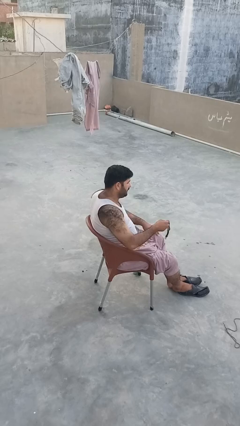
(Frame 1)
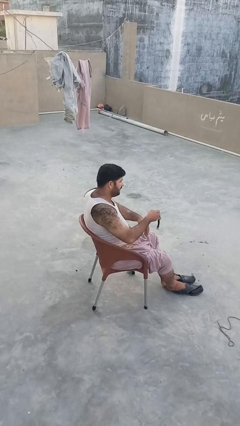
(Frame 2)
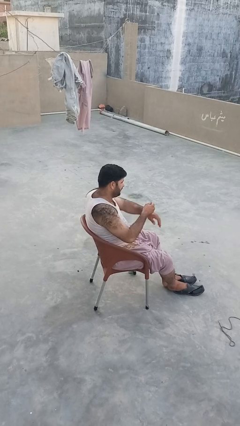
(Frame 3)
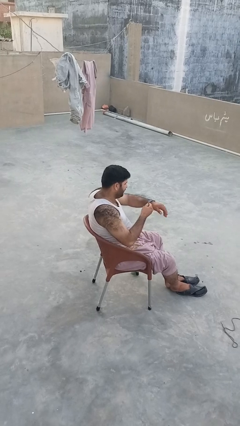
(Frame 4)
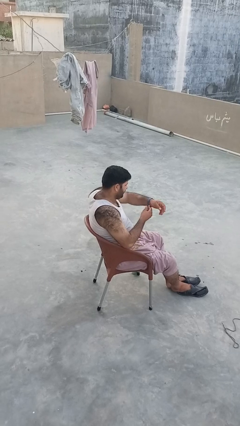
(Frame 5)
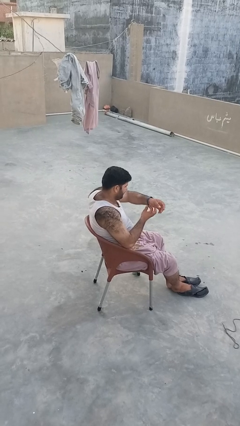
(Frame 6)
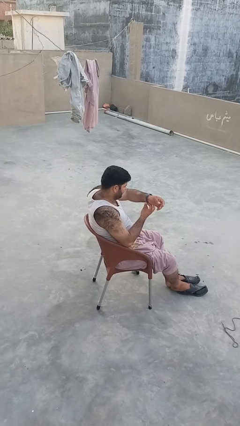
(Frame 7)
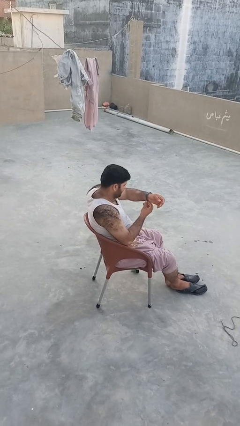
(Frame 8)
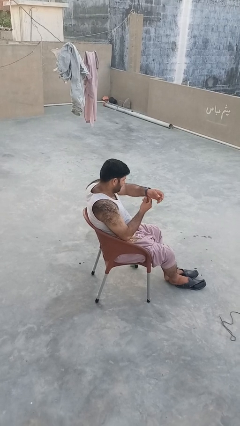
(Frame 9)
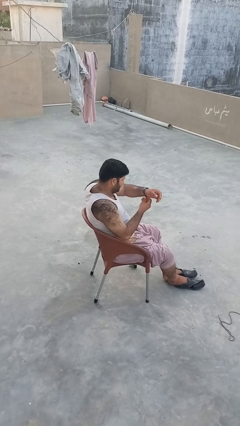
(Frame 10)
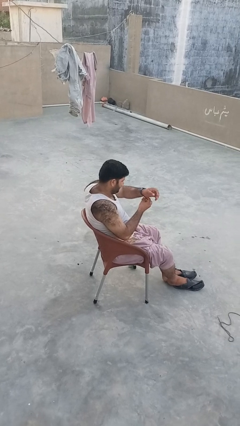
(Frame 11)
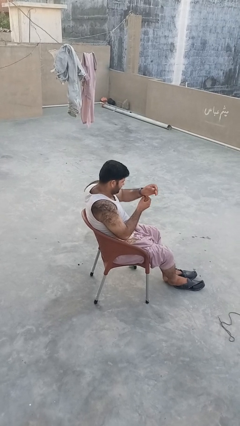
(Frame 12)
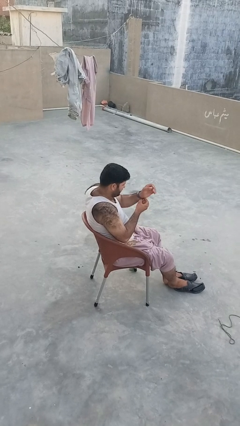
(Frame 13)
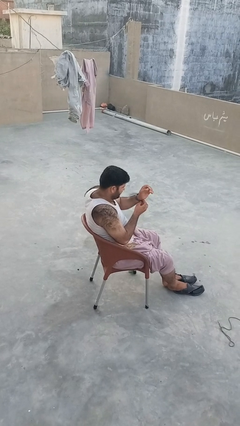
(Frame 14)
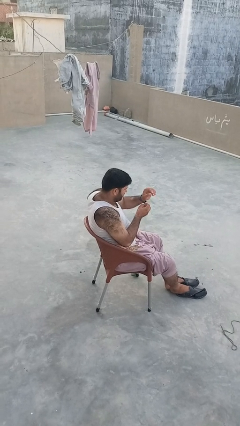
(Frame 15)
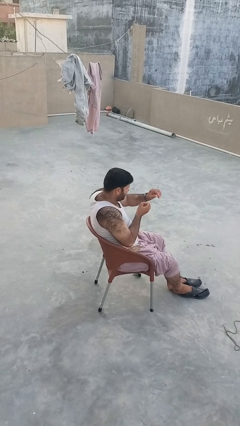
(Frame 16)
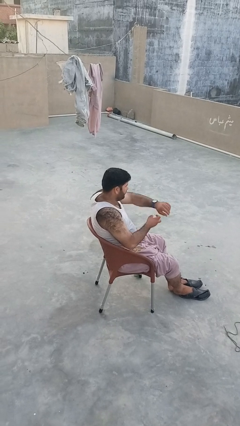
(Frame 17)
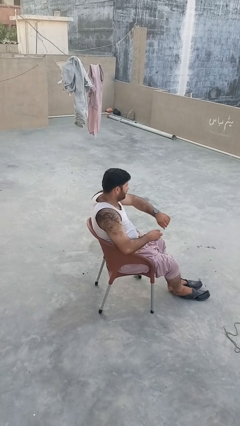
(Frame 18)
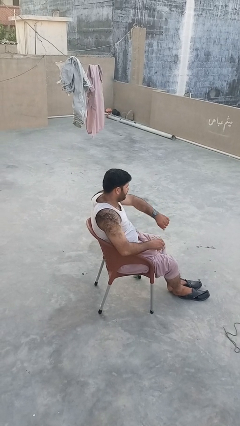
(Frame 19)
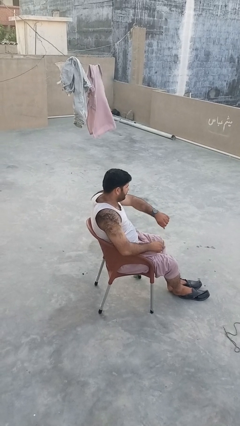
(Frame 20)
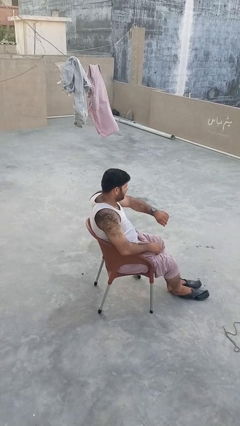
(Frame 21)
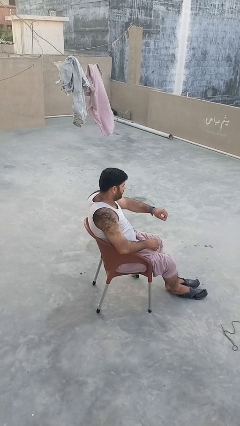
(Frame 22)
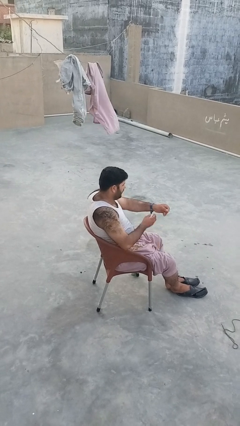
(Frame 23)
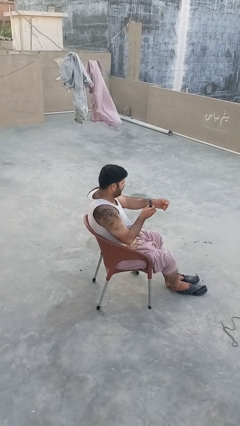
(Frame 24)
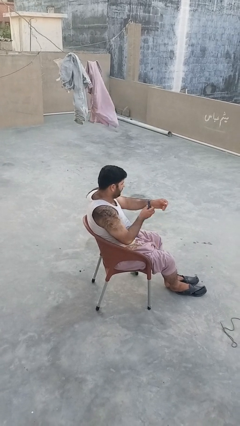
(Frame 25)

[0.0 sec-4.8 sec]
person puts on wristwatch

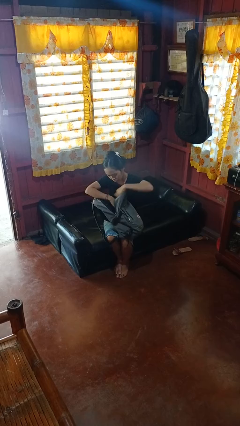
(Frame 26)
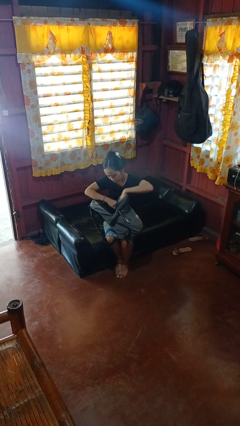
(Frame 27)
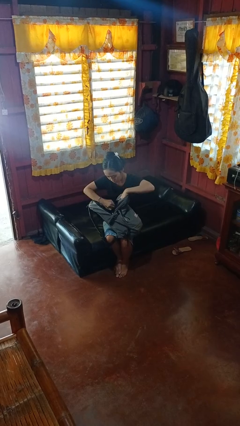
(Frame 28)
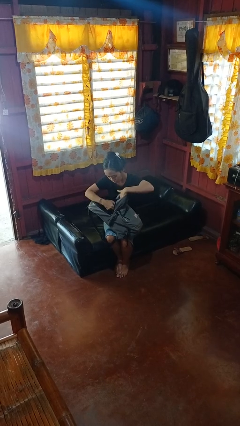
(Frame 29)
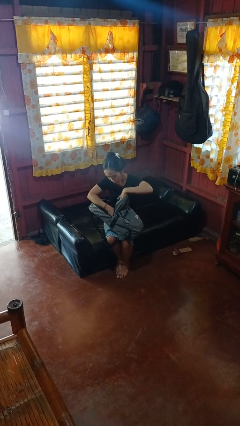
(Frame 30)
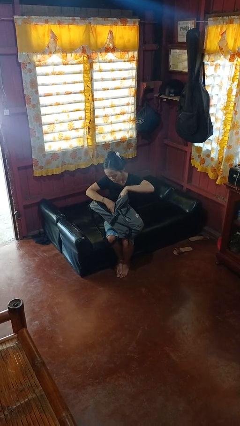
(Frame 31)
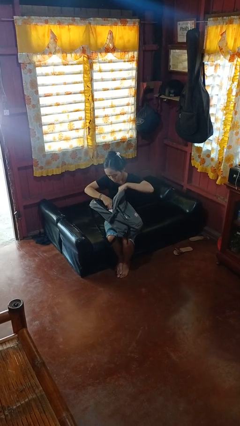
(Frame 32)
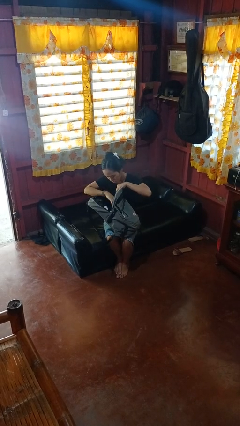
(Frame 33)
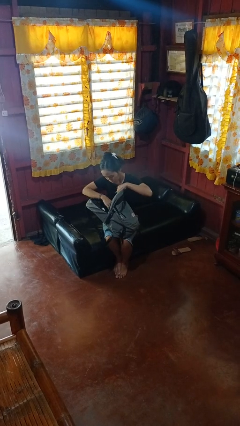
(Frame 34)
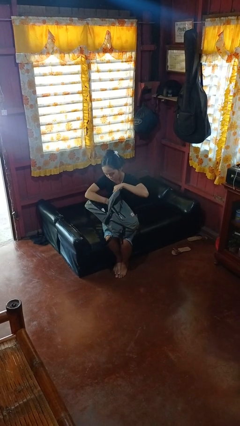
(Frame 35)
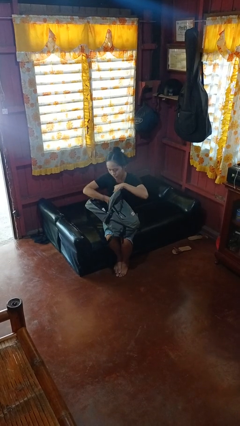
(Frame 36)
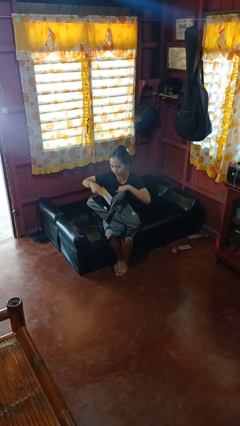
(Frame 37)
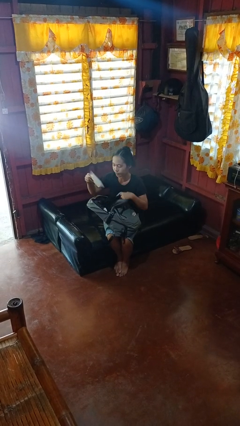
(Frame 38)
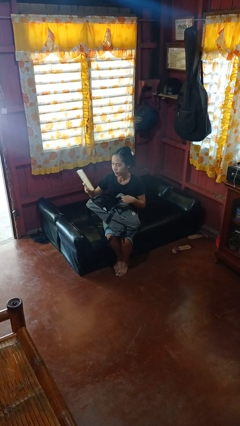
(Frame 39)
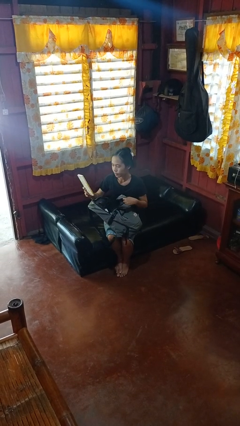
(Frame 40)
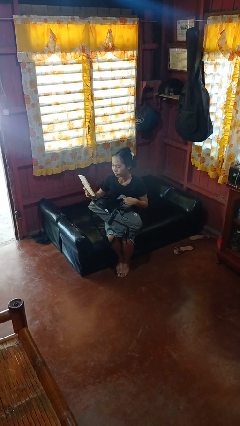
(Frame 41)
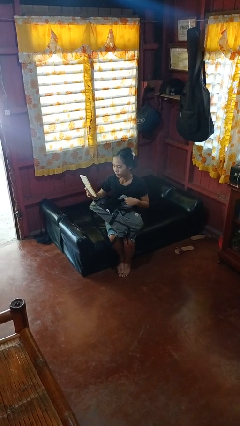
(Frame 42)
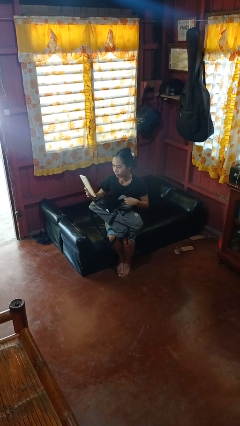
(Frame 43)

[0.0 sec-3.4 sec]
person searches in backpack

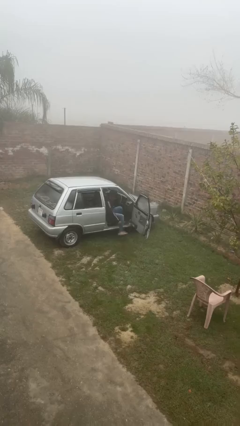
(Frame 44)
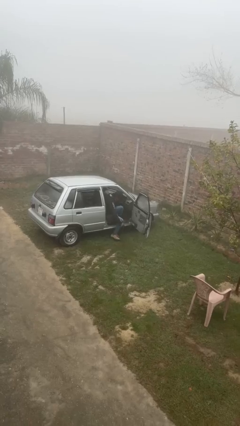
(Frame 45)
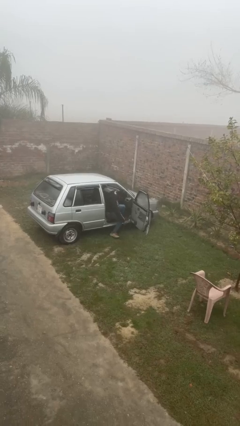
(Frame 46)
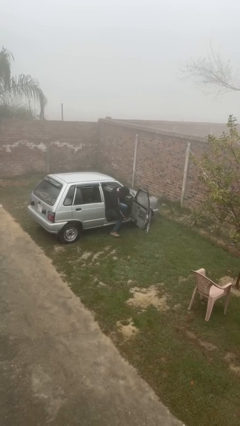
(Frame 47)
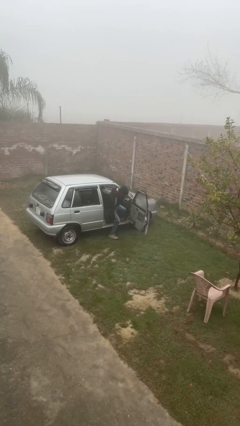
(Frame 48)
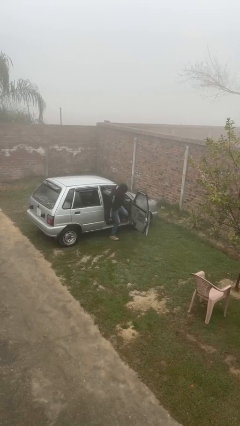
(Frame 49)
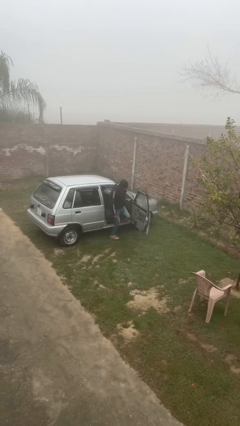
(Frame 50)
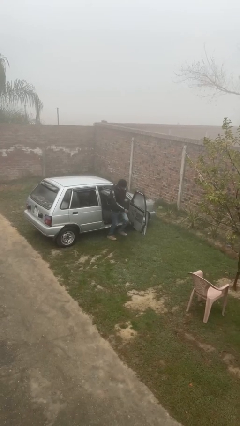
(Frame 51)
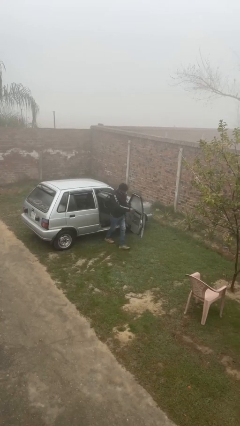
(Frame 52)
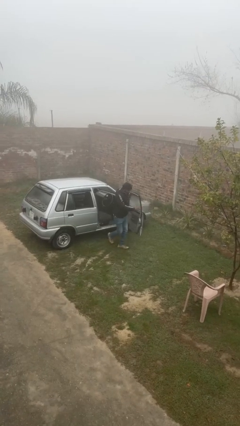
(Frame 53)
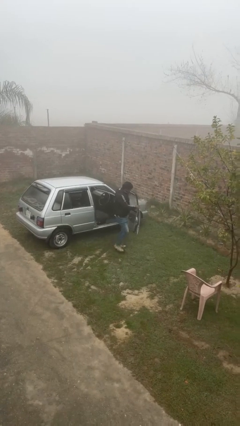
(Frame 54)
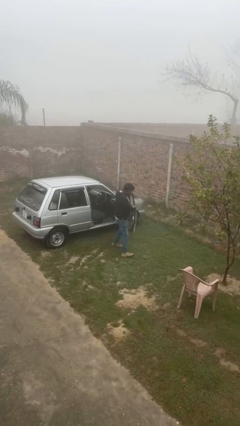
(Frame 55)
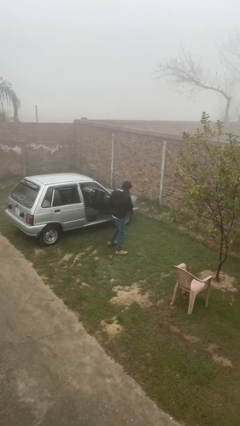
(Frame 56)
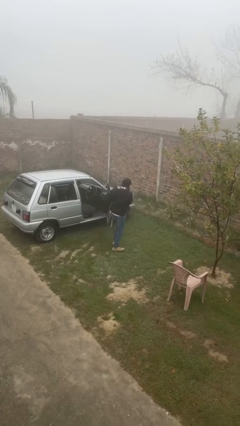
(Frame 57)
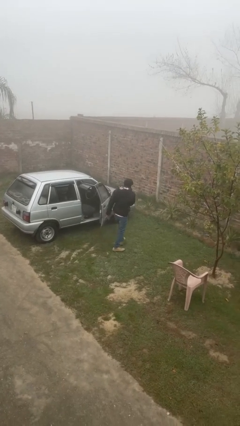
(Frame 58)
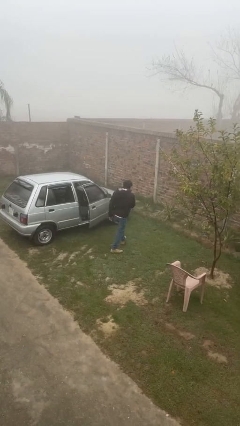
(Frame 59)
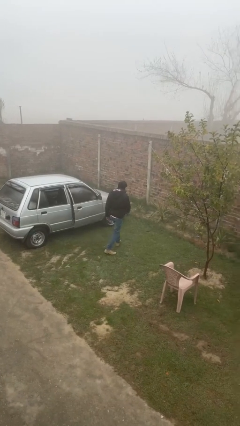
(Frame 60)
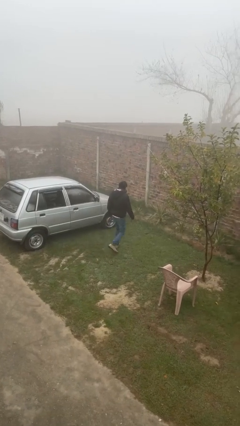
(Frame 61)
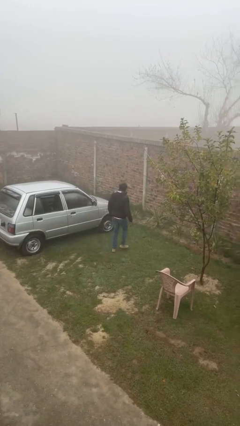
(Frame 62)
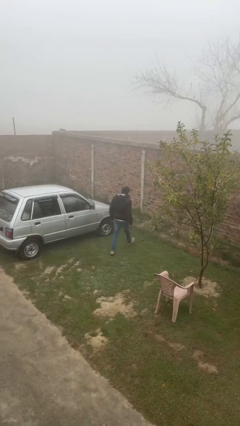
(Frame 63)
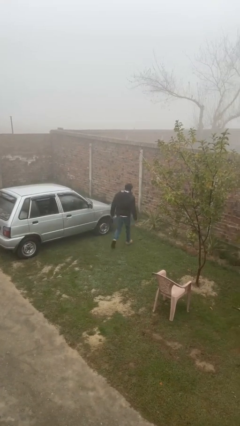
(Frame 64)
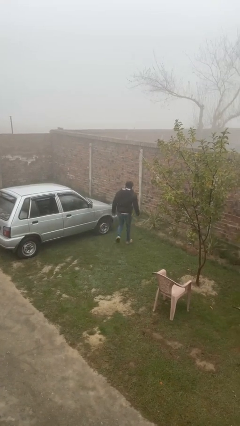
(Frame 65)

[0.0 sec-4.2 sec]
person exits car

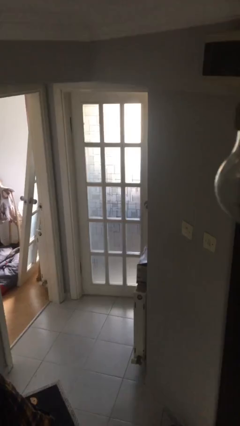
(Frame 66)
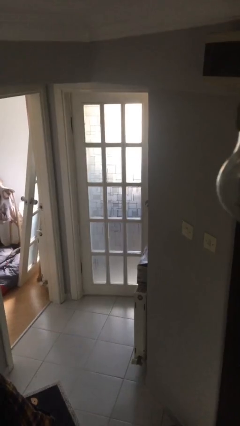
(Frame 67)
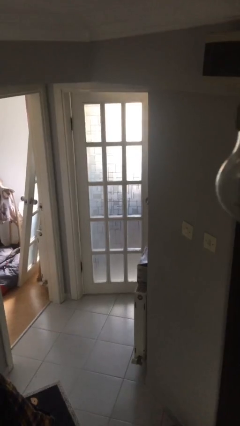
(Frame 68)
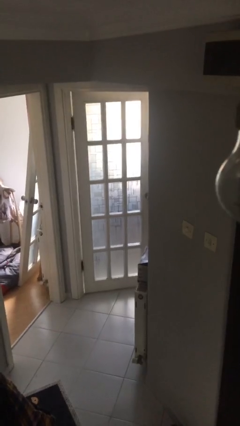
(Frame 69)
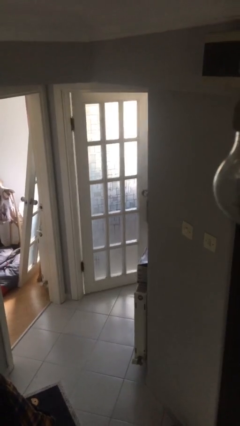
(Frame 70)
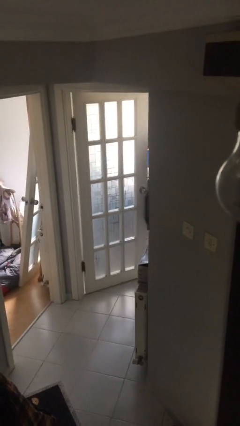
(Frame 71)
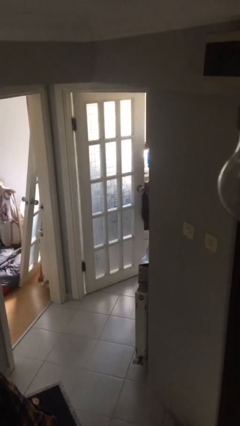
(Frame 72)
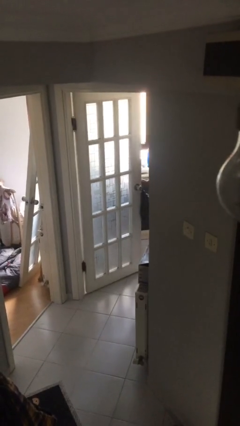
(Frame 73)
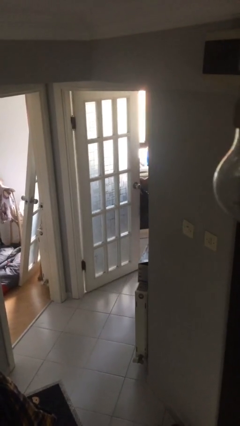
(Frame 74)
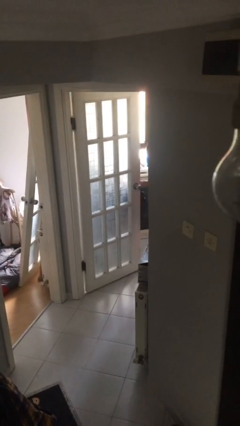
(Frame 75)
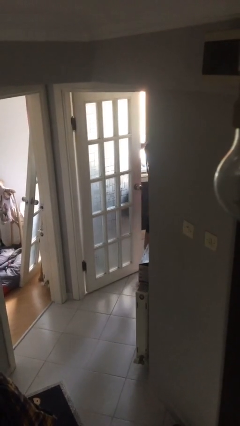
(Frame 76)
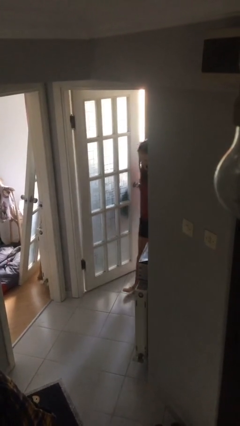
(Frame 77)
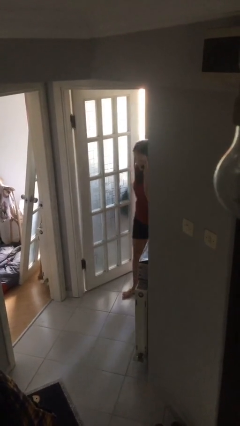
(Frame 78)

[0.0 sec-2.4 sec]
person opens facility door

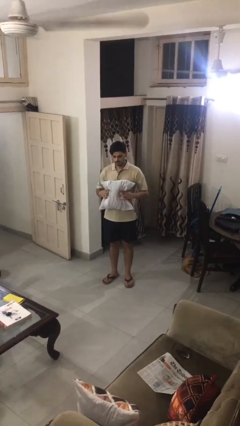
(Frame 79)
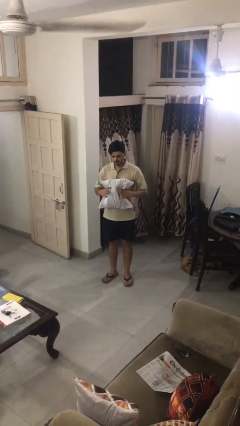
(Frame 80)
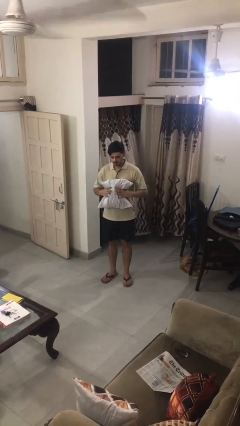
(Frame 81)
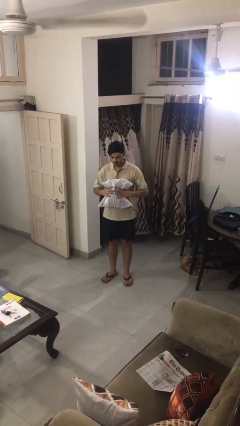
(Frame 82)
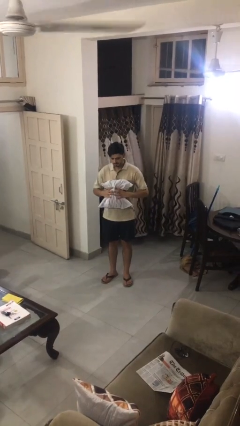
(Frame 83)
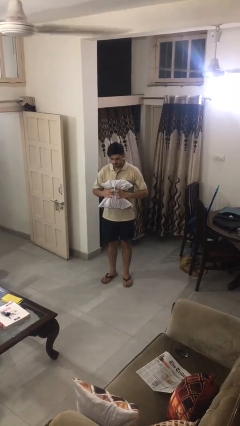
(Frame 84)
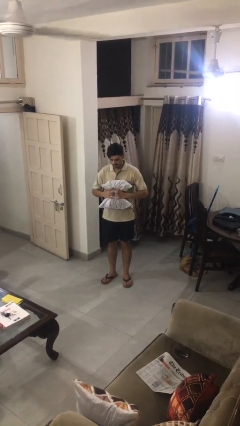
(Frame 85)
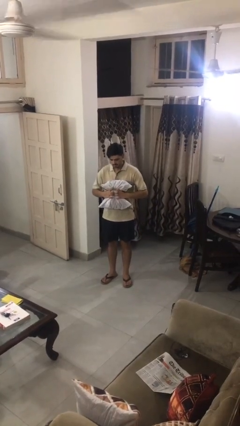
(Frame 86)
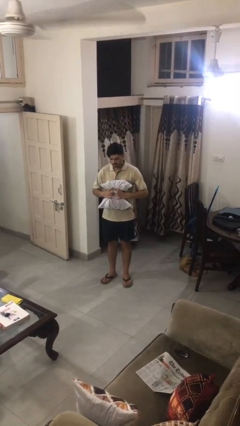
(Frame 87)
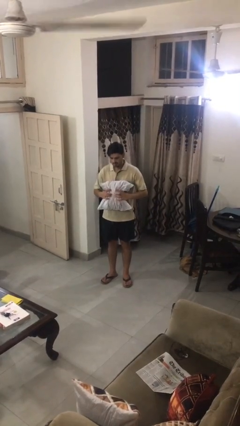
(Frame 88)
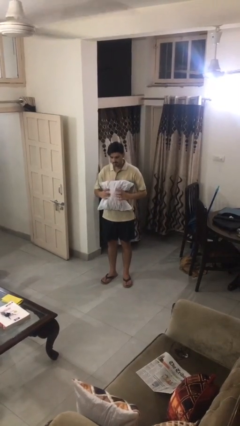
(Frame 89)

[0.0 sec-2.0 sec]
person squeezes object

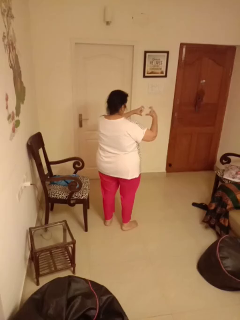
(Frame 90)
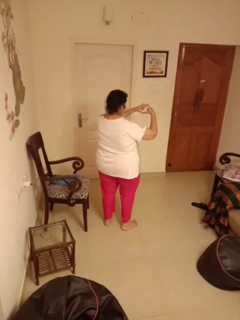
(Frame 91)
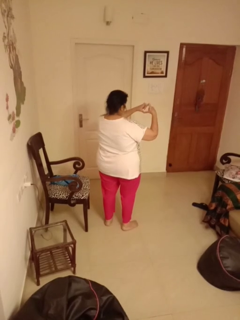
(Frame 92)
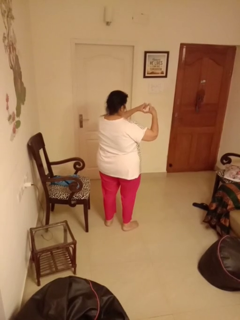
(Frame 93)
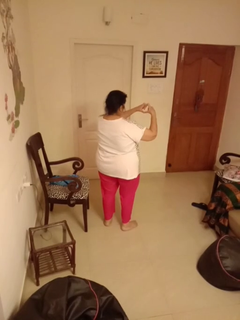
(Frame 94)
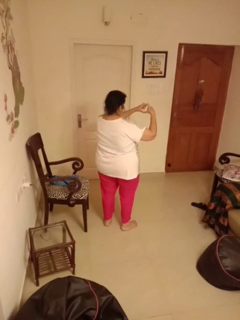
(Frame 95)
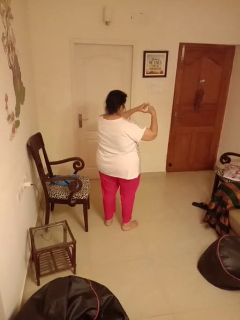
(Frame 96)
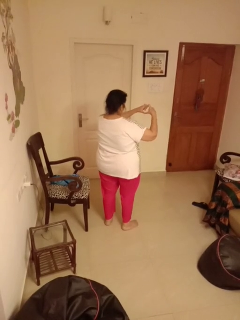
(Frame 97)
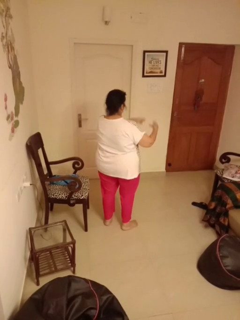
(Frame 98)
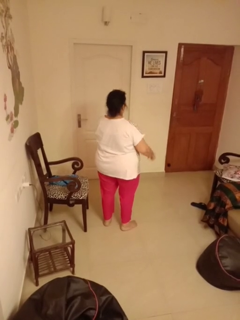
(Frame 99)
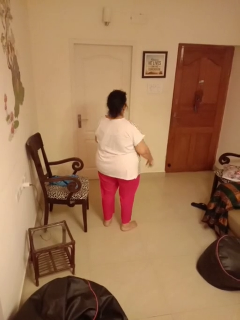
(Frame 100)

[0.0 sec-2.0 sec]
person gestures heart
